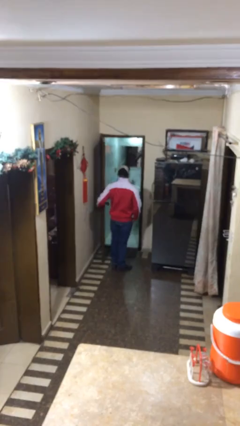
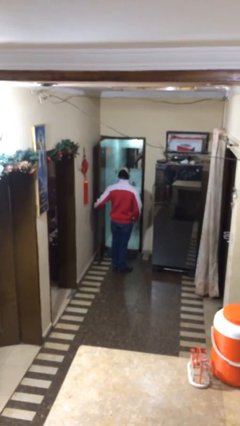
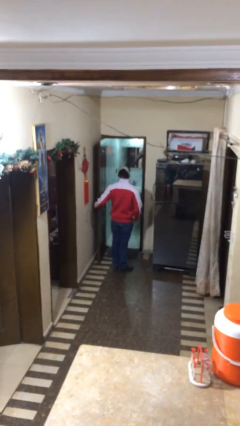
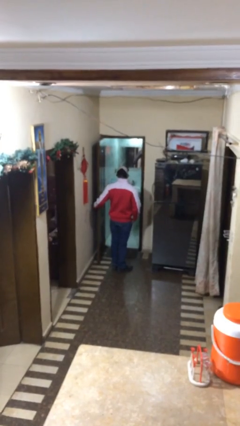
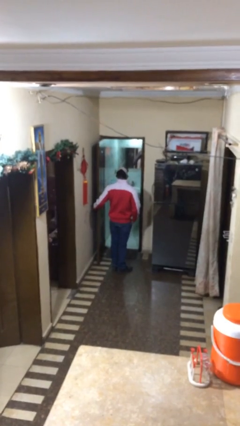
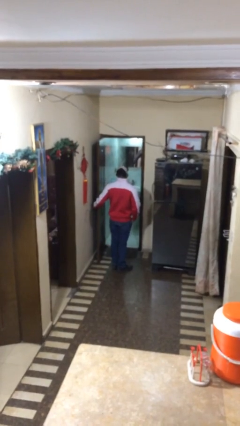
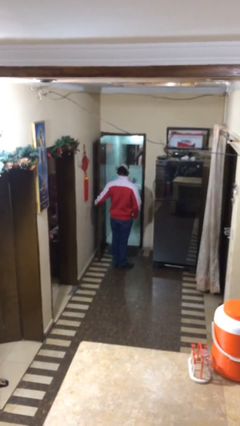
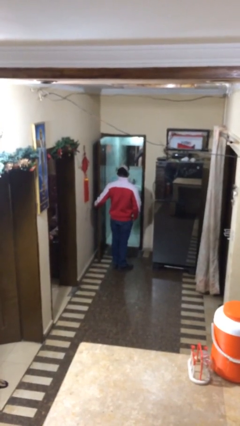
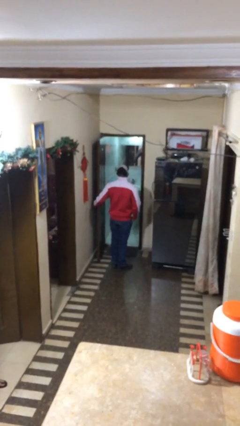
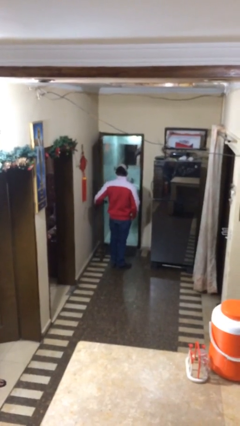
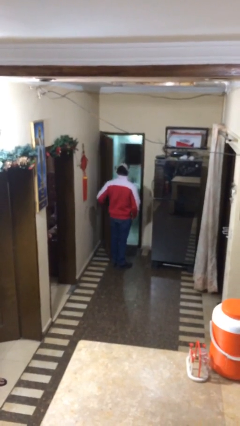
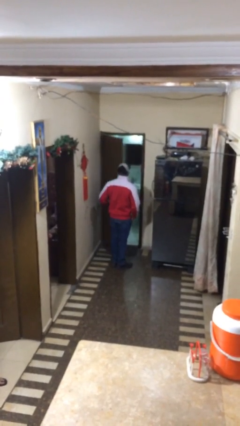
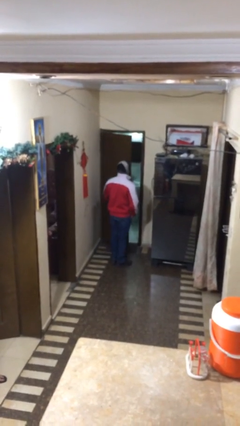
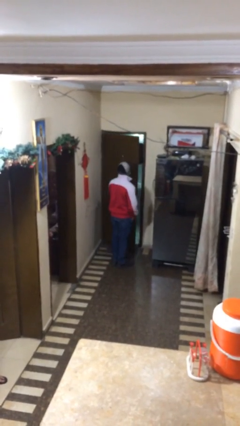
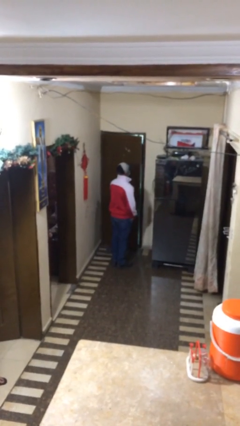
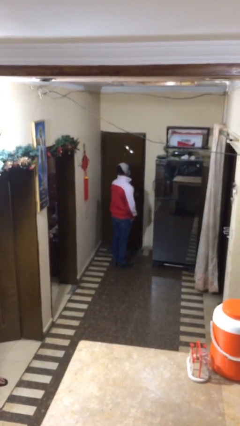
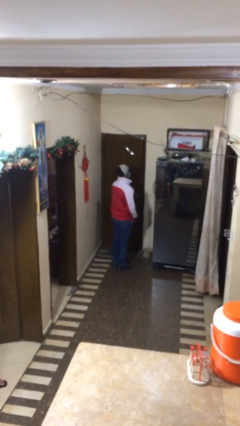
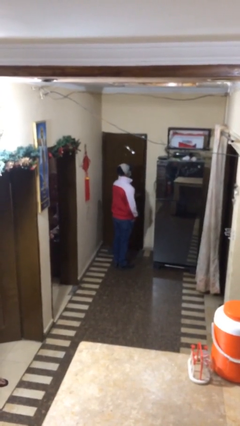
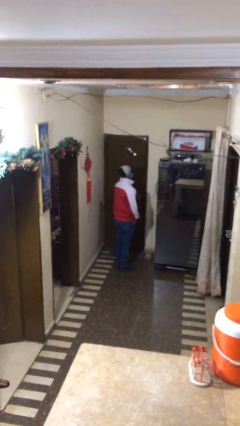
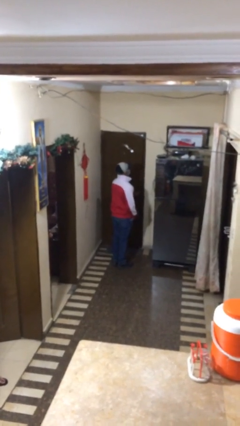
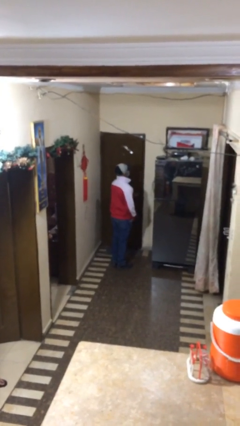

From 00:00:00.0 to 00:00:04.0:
person closes facility door

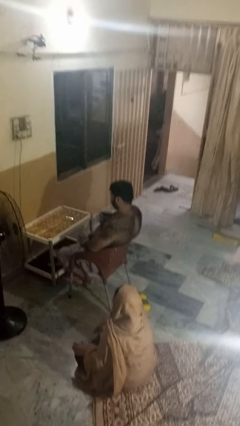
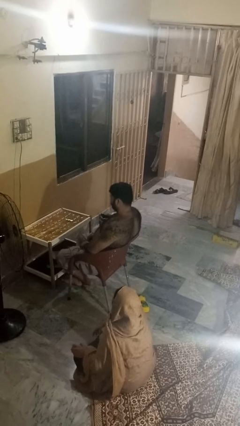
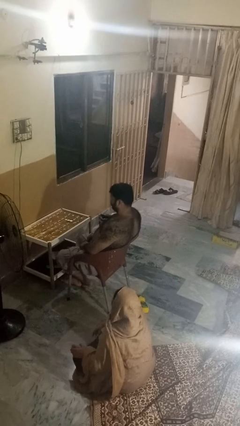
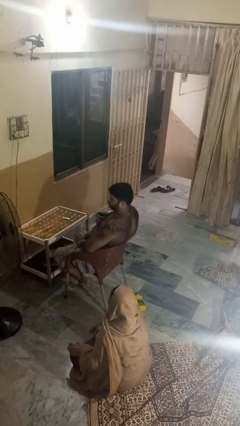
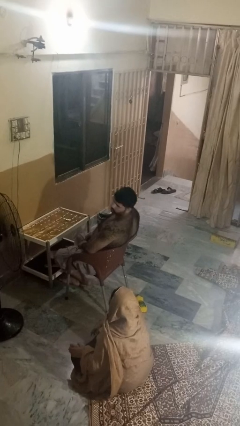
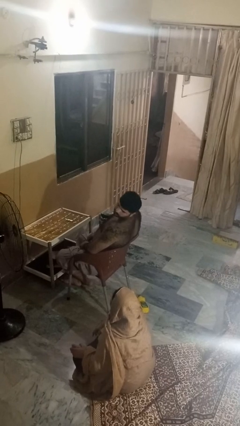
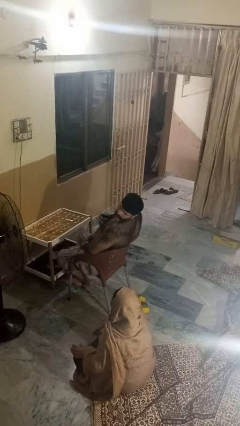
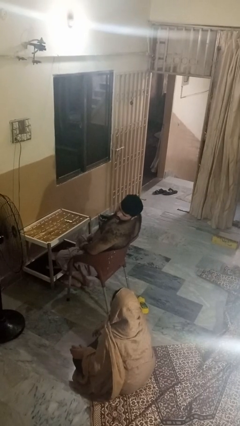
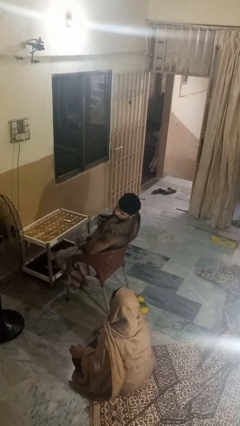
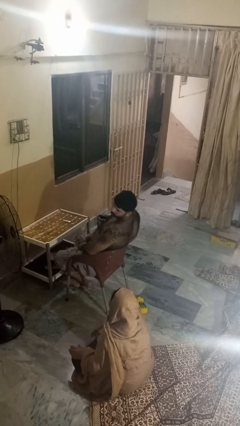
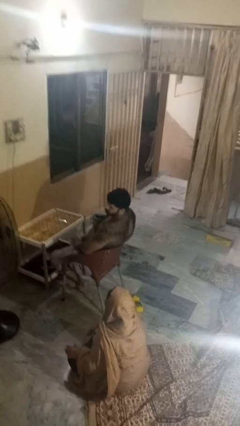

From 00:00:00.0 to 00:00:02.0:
person looks over shoulder

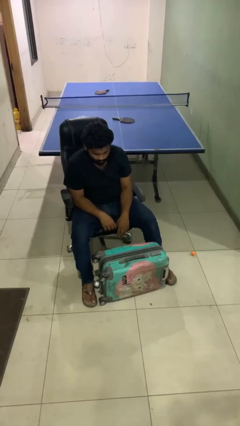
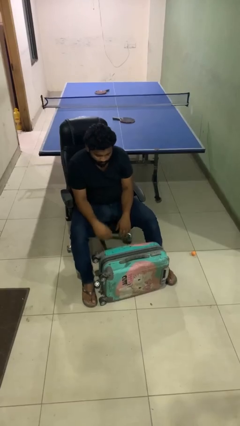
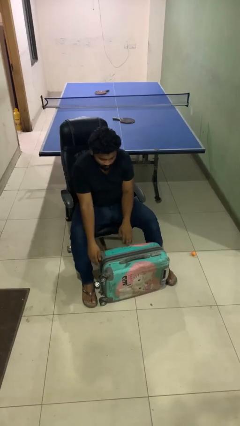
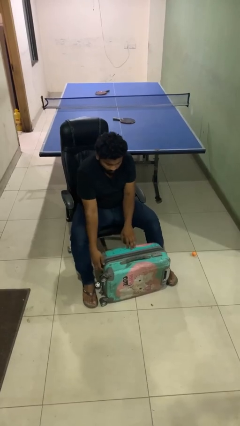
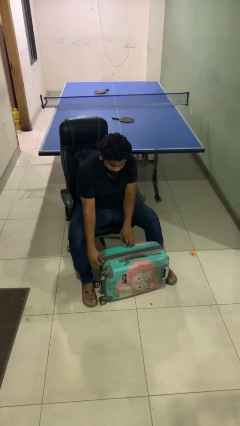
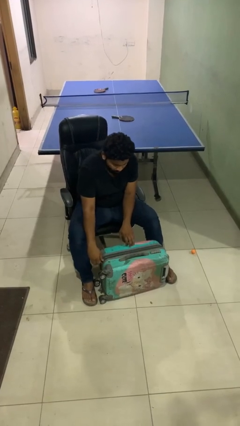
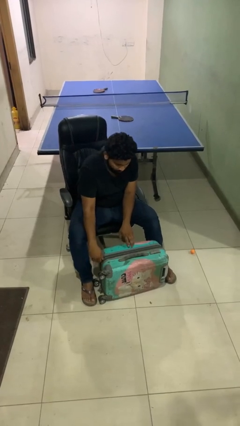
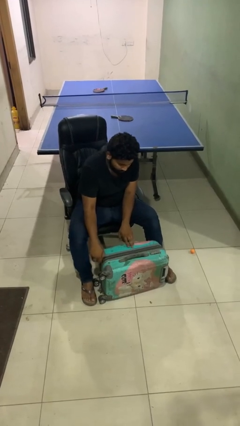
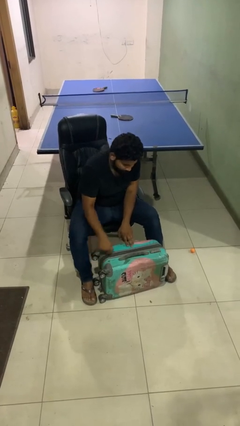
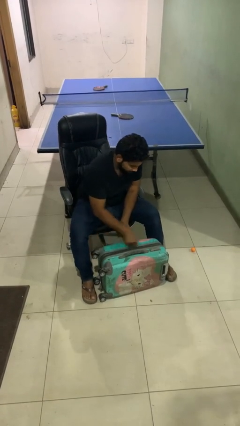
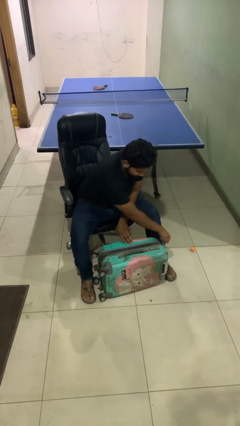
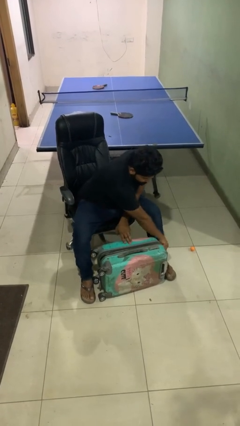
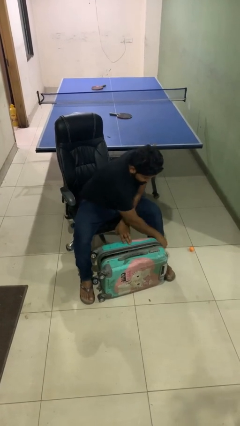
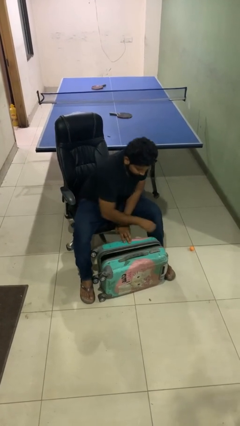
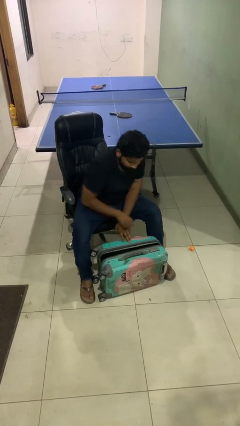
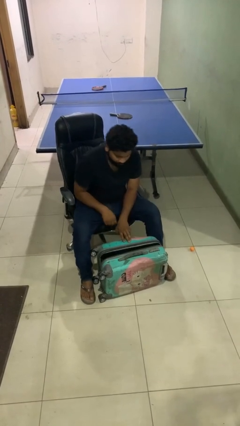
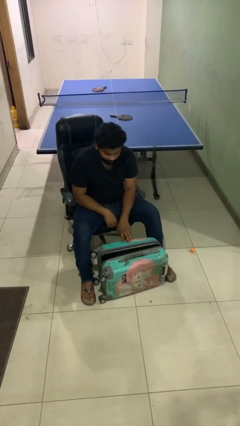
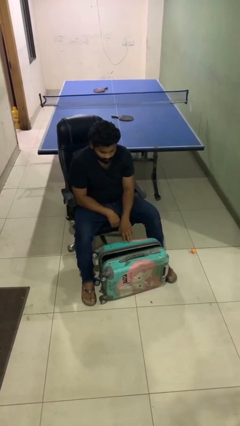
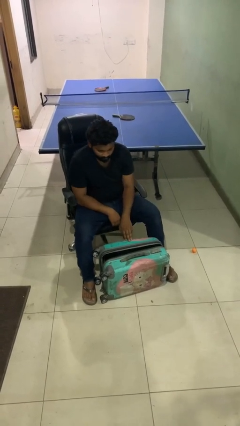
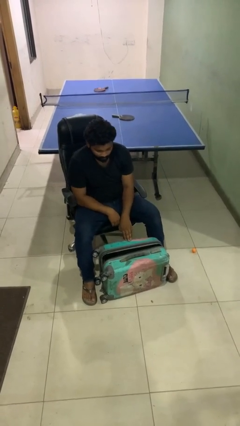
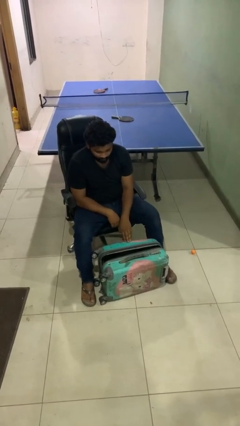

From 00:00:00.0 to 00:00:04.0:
person opens suitcase

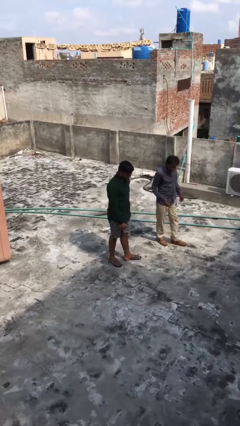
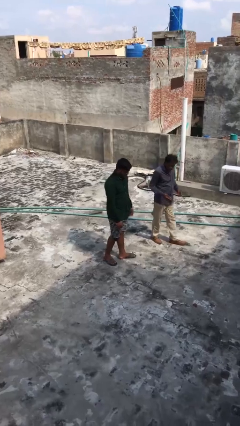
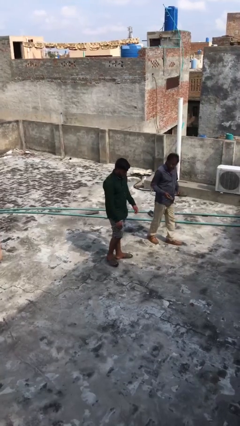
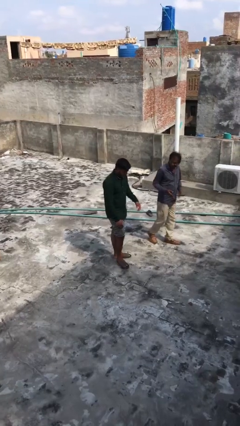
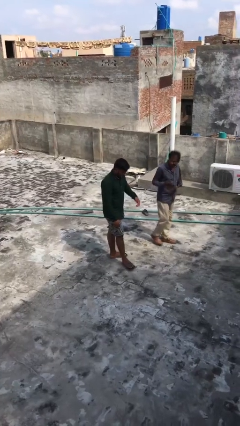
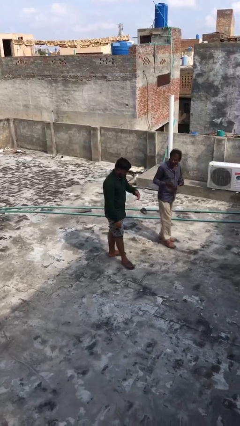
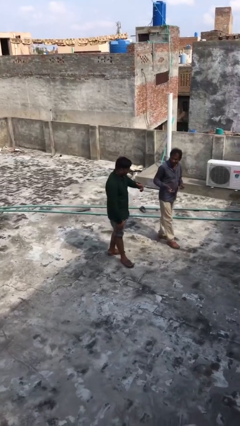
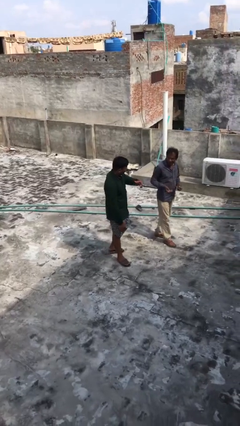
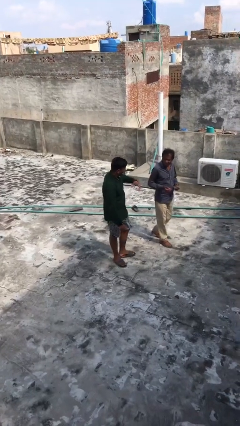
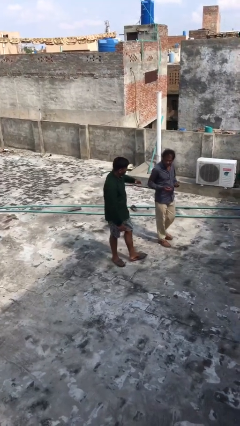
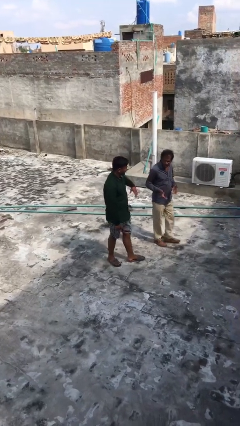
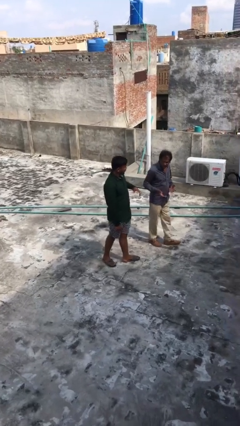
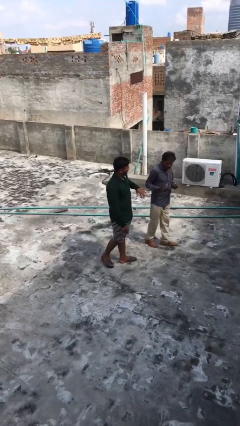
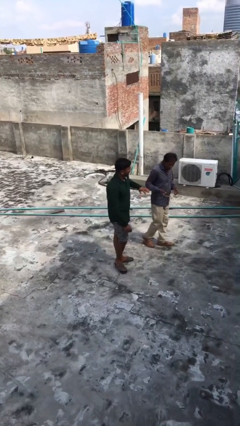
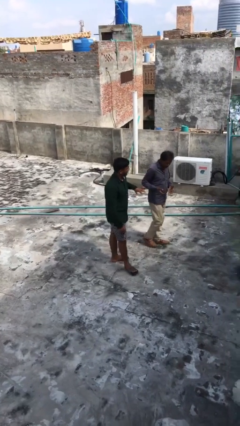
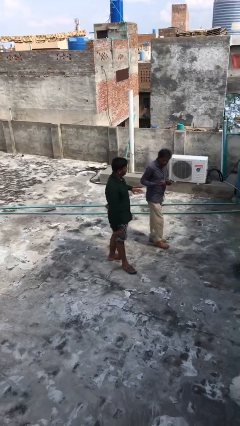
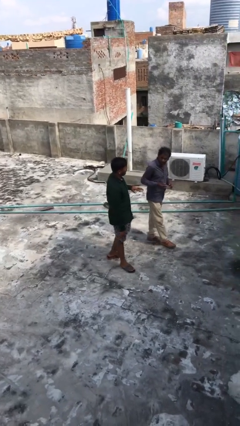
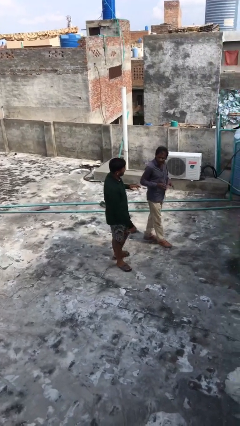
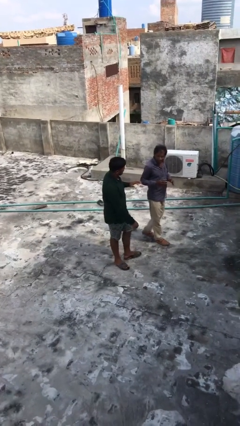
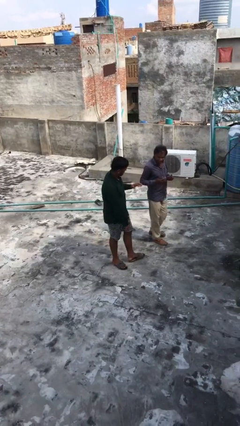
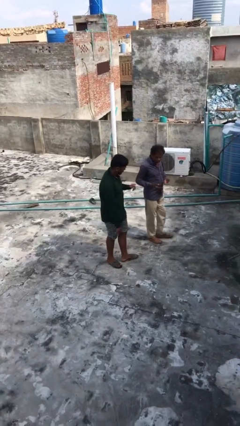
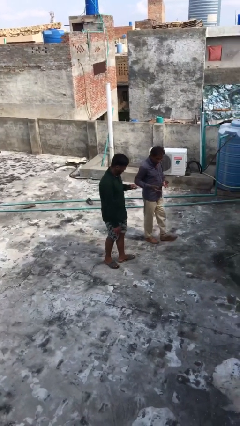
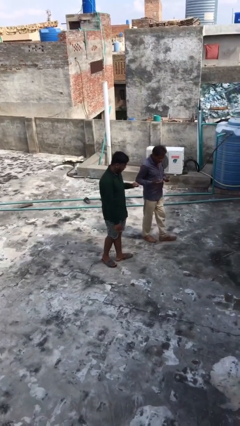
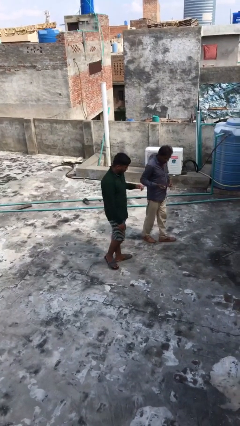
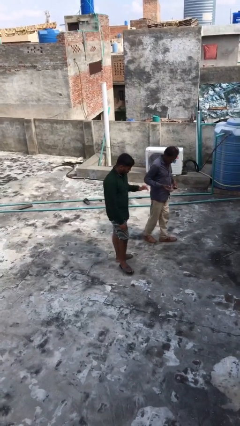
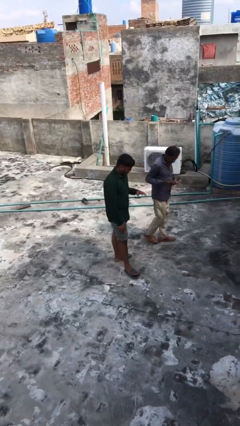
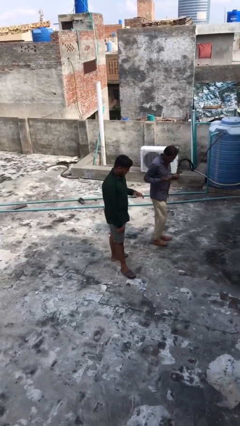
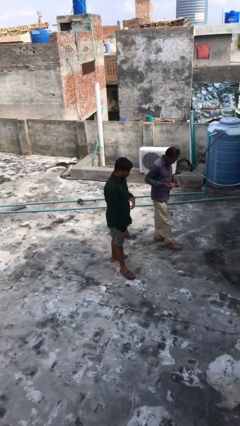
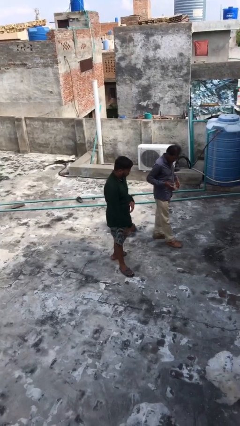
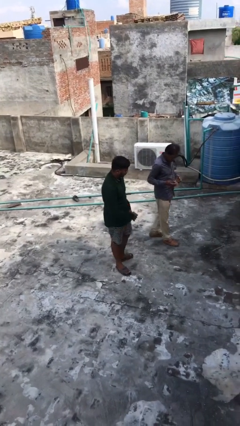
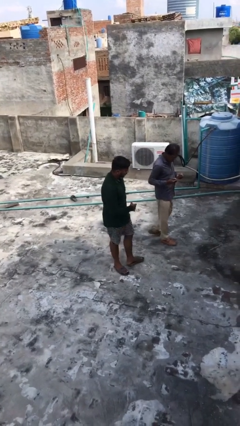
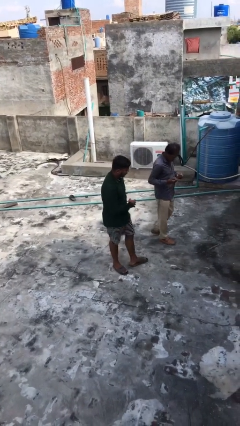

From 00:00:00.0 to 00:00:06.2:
person talks to person

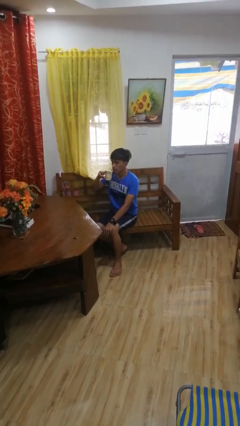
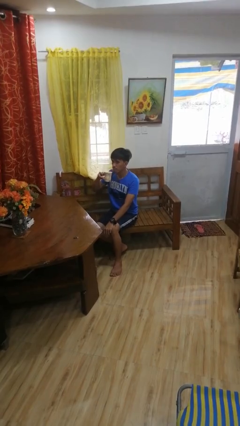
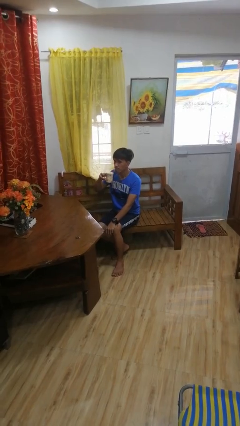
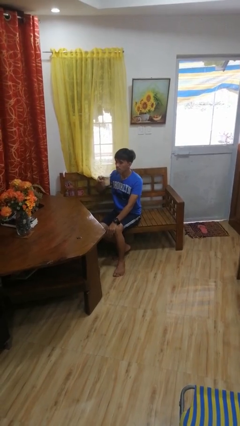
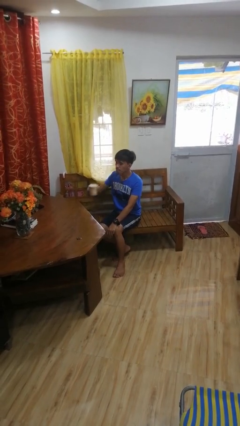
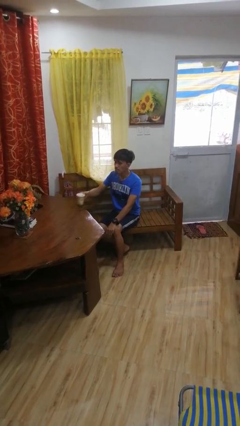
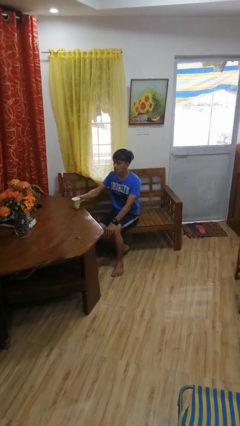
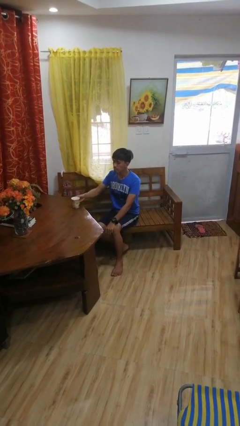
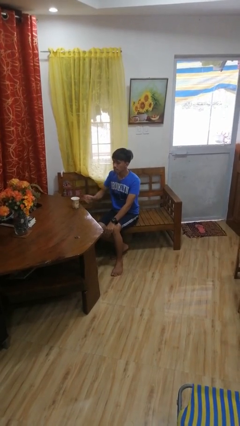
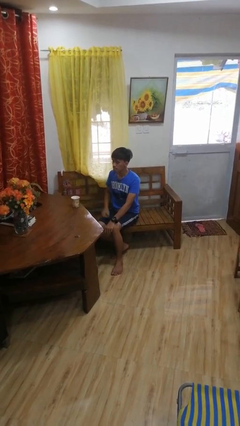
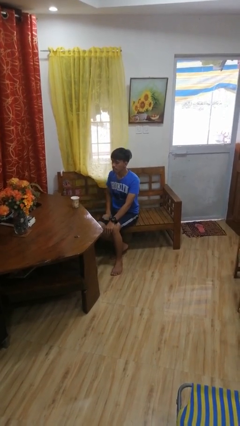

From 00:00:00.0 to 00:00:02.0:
person puts down object on table
